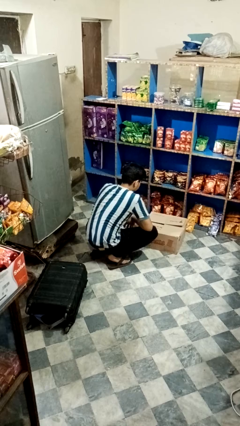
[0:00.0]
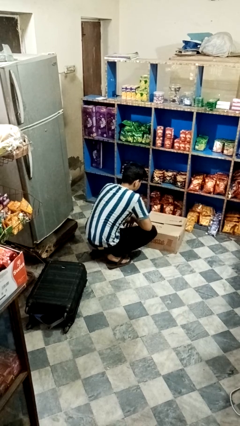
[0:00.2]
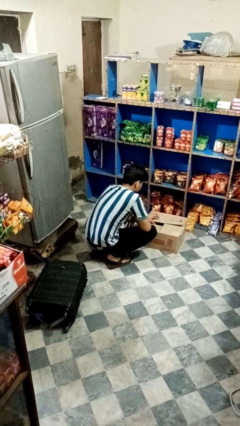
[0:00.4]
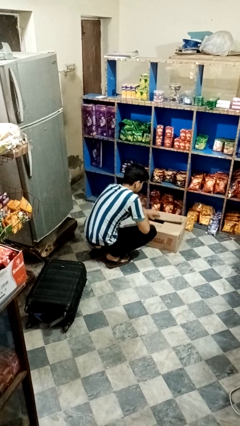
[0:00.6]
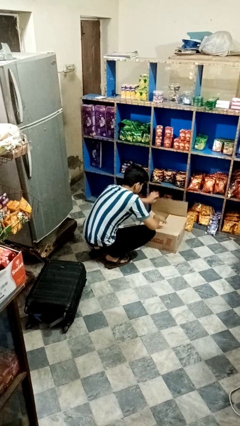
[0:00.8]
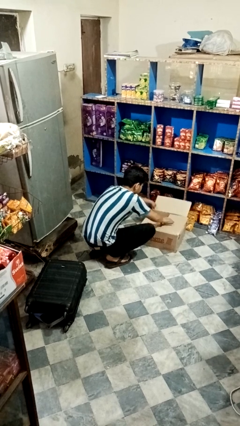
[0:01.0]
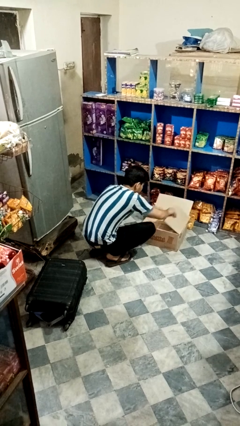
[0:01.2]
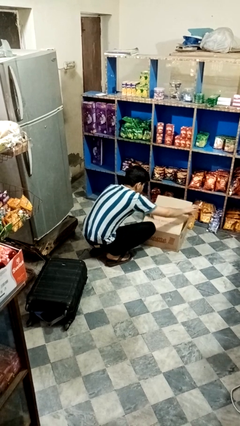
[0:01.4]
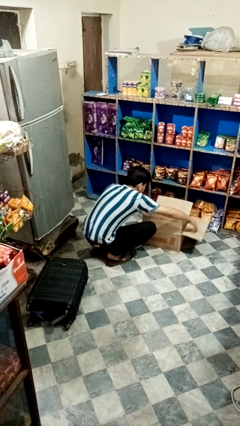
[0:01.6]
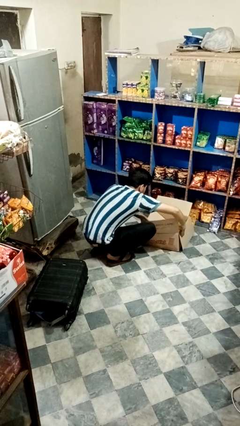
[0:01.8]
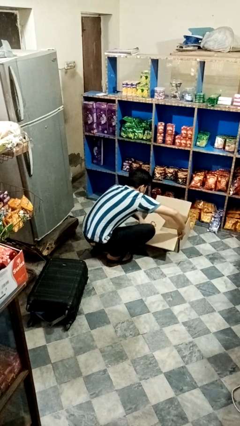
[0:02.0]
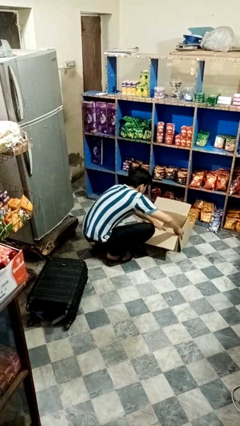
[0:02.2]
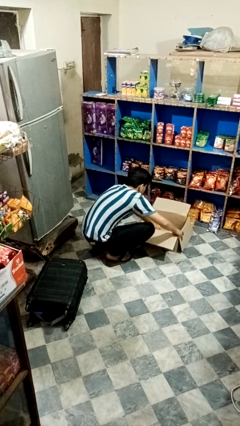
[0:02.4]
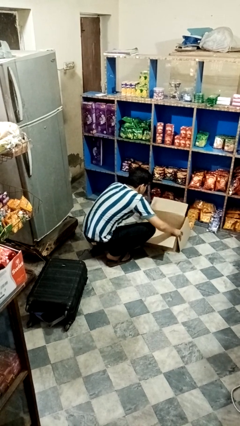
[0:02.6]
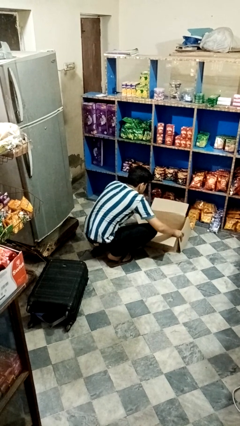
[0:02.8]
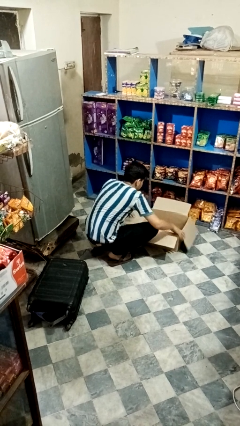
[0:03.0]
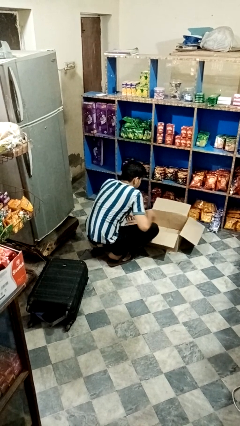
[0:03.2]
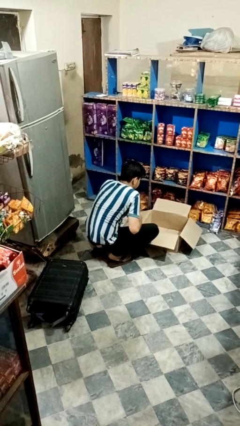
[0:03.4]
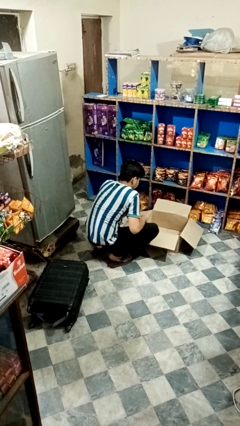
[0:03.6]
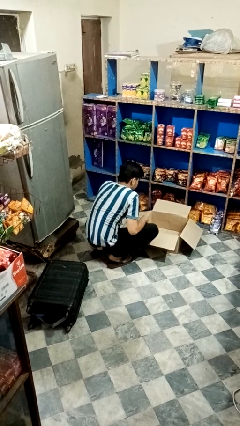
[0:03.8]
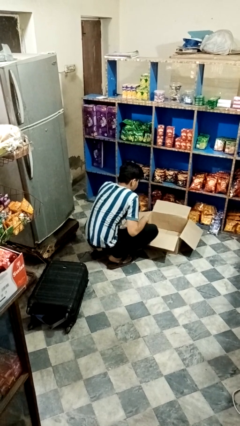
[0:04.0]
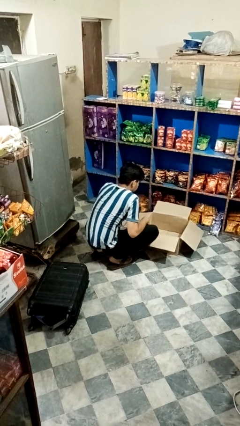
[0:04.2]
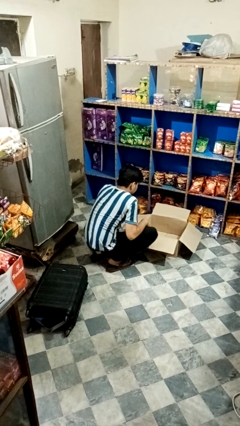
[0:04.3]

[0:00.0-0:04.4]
person opens box

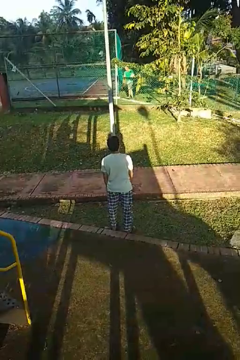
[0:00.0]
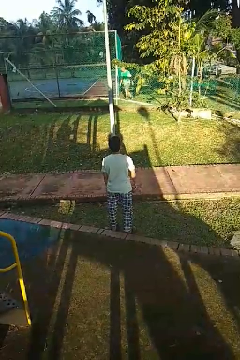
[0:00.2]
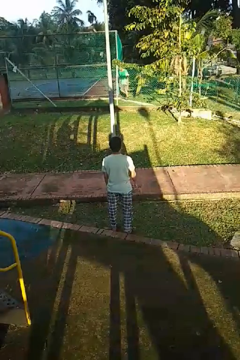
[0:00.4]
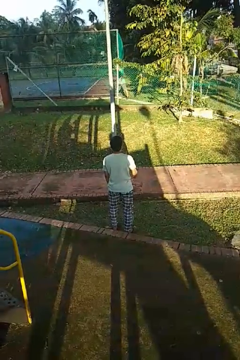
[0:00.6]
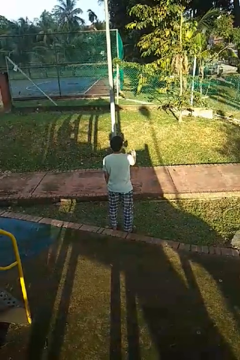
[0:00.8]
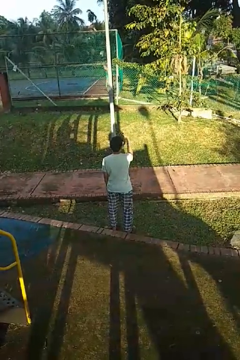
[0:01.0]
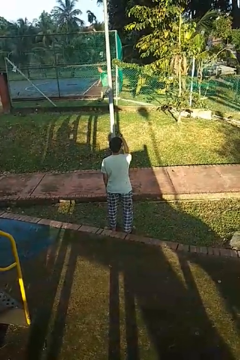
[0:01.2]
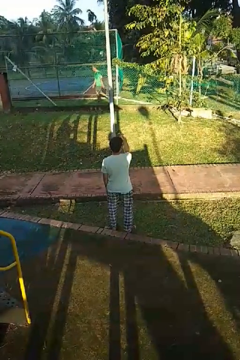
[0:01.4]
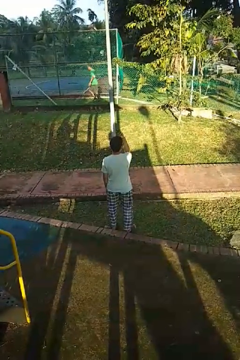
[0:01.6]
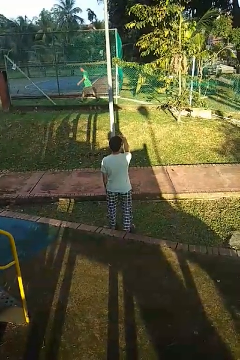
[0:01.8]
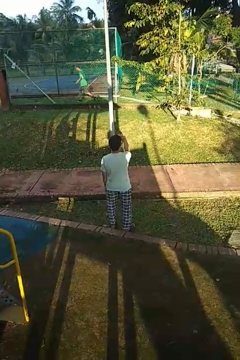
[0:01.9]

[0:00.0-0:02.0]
person gestures watch closely

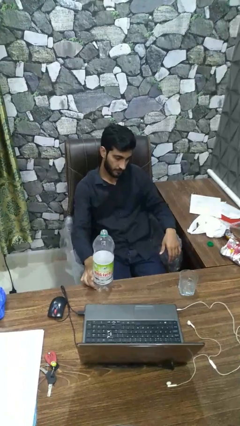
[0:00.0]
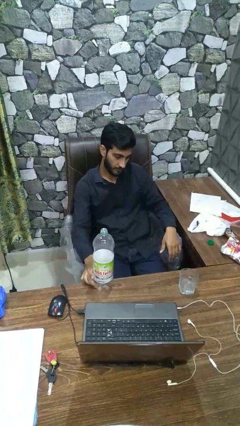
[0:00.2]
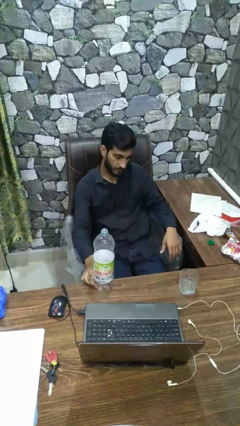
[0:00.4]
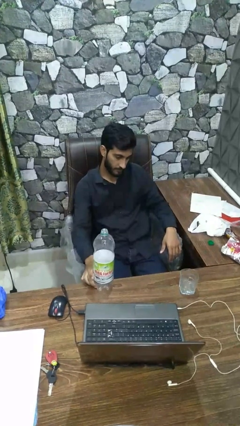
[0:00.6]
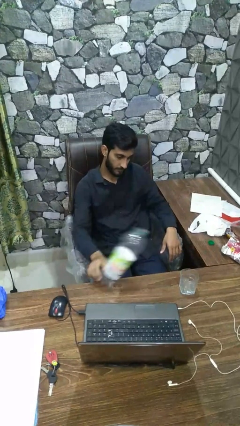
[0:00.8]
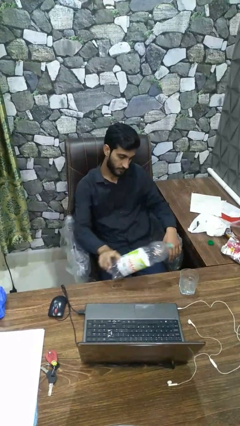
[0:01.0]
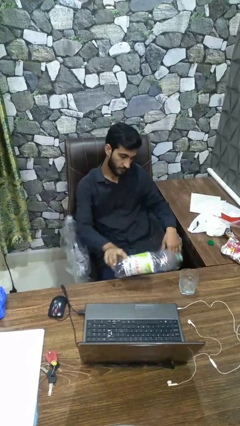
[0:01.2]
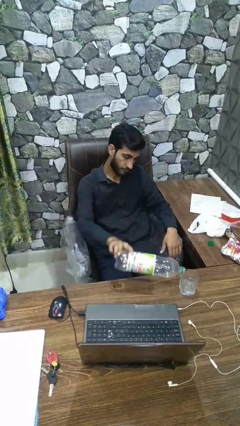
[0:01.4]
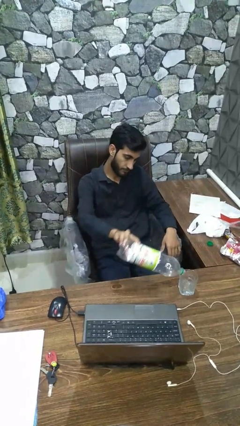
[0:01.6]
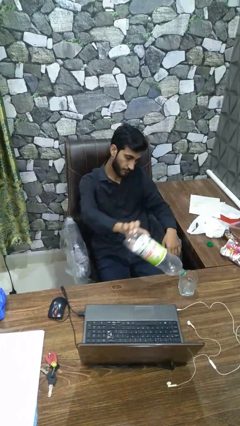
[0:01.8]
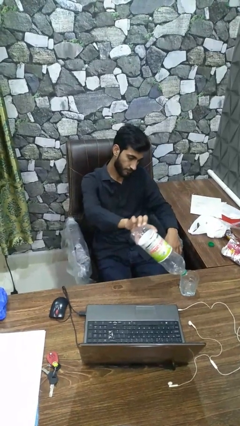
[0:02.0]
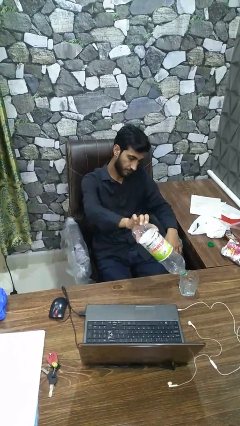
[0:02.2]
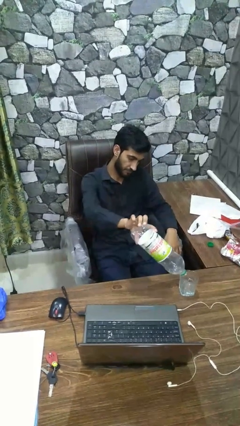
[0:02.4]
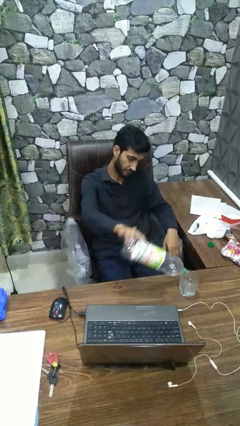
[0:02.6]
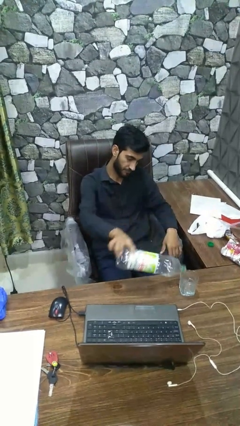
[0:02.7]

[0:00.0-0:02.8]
person pours liquid into cup

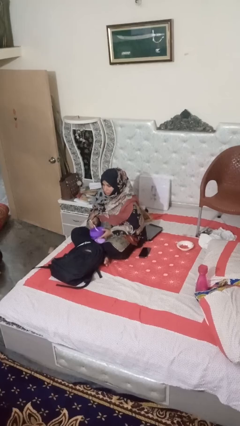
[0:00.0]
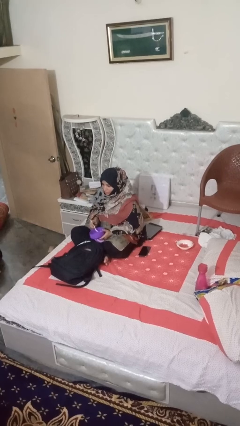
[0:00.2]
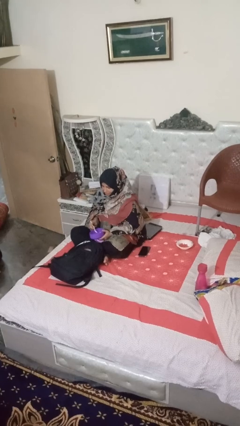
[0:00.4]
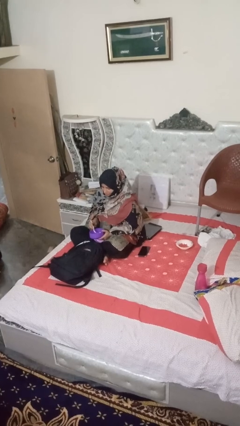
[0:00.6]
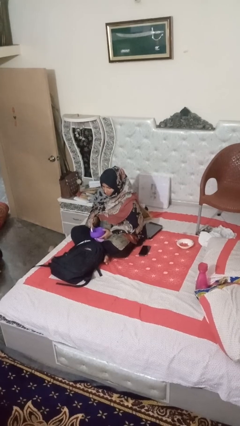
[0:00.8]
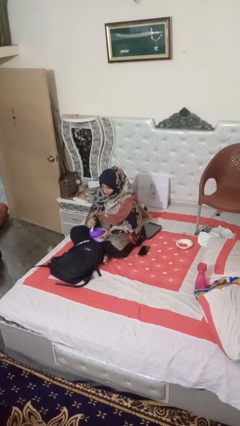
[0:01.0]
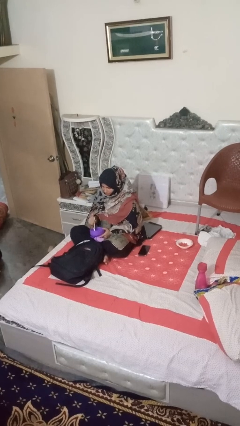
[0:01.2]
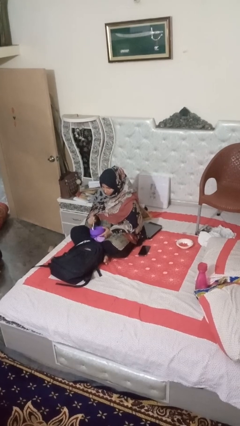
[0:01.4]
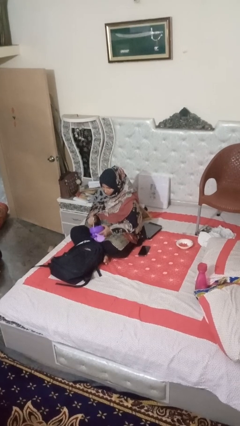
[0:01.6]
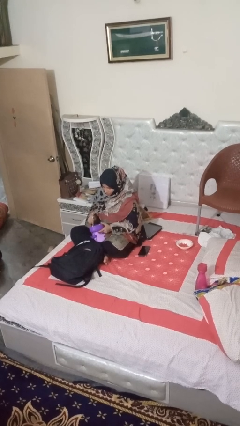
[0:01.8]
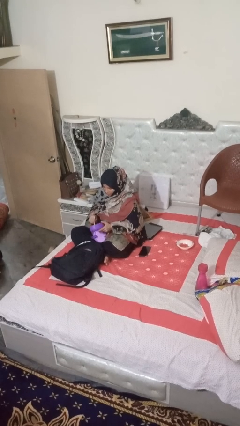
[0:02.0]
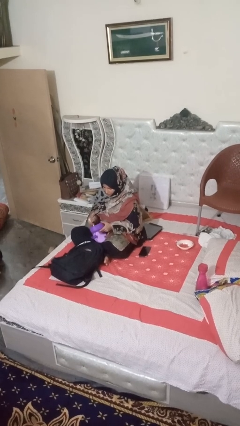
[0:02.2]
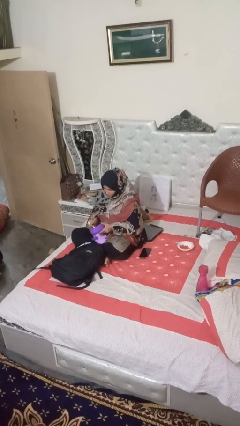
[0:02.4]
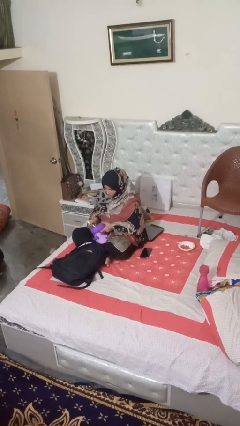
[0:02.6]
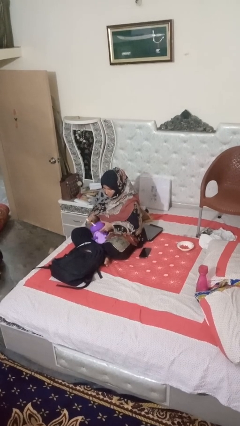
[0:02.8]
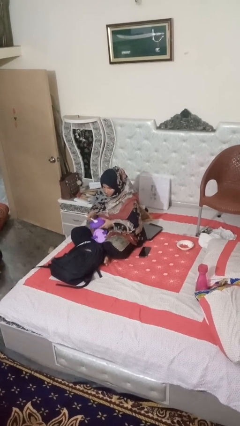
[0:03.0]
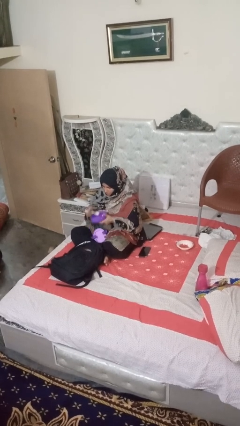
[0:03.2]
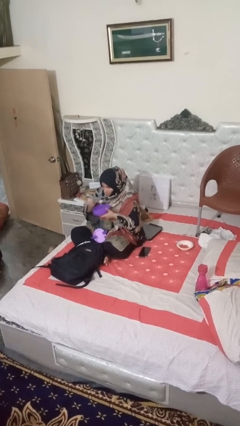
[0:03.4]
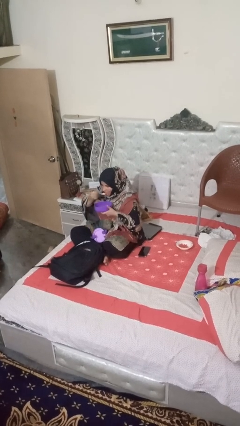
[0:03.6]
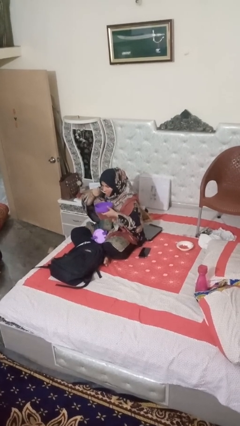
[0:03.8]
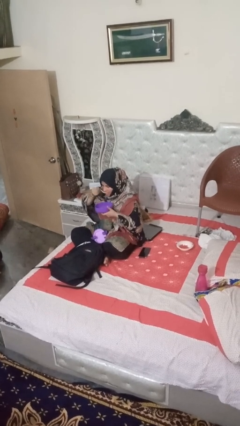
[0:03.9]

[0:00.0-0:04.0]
person eats snack from bag

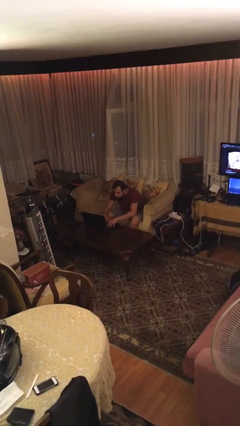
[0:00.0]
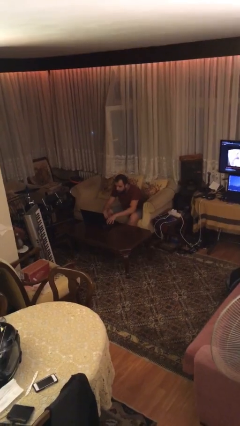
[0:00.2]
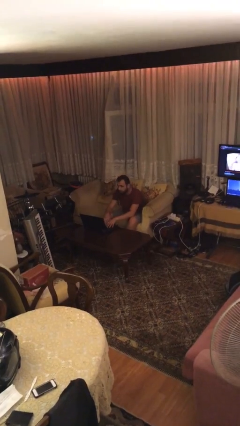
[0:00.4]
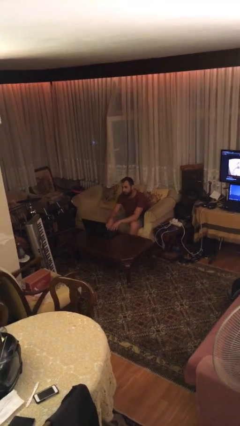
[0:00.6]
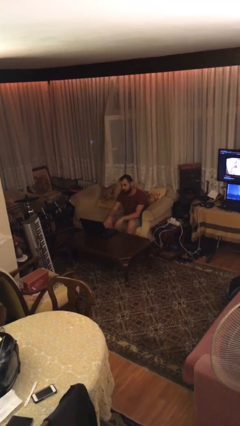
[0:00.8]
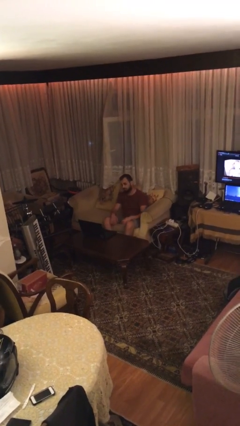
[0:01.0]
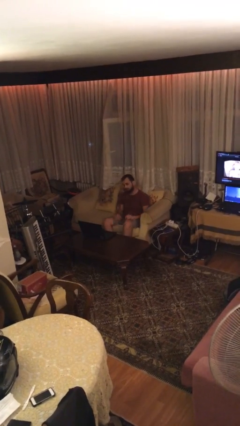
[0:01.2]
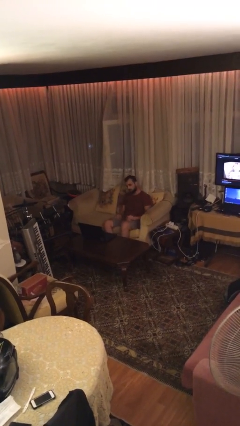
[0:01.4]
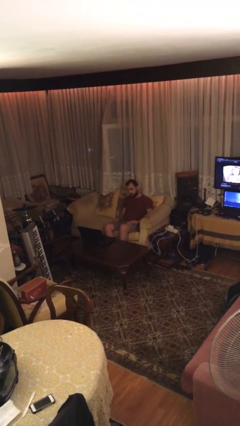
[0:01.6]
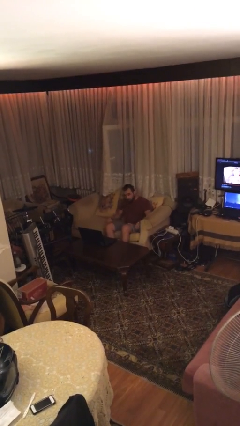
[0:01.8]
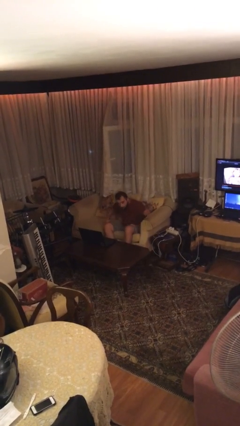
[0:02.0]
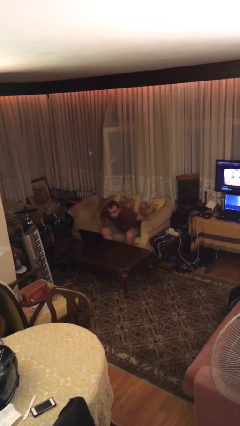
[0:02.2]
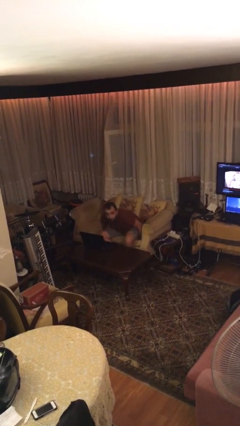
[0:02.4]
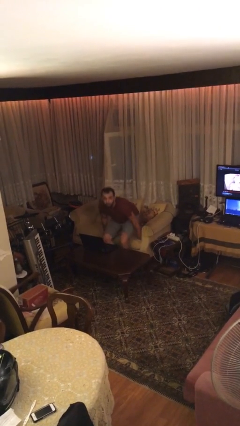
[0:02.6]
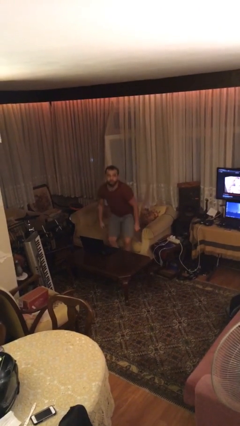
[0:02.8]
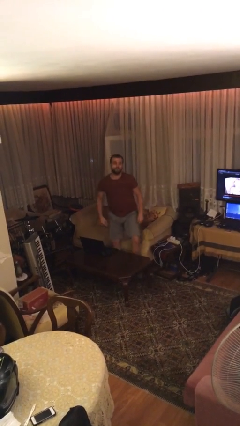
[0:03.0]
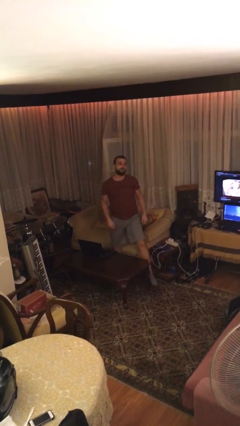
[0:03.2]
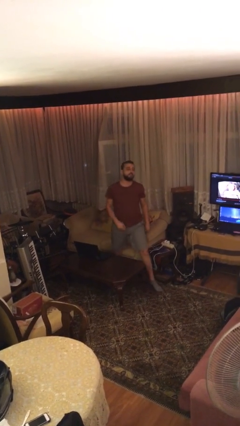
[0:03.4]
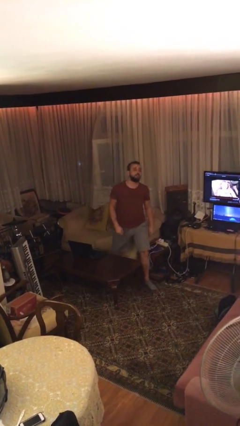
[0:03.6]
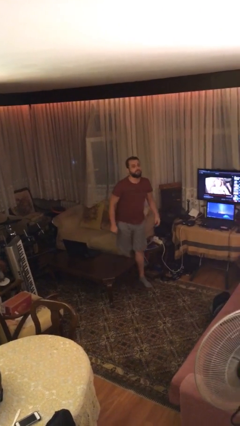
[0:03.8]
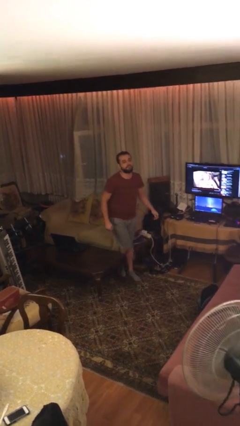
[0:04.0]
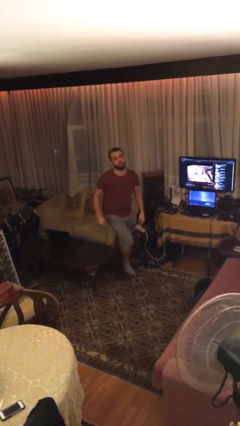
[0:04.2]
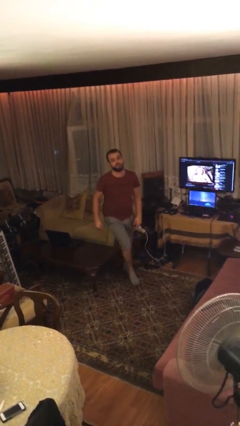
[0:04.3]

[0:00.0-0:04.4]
person stands up

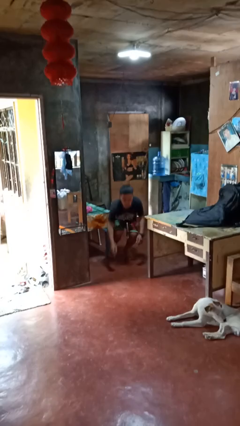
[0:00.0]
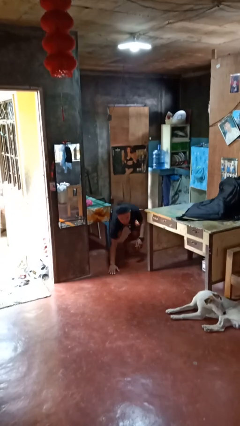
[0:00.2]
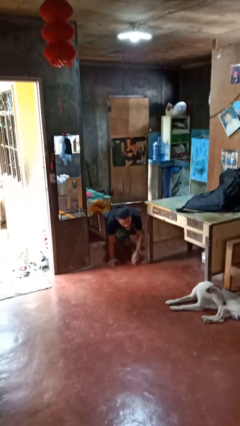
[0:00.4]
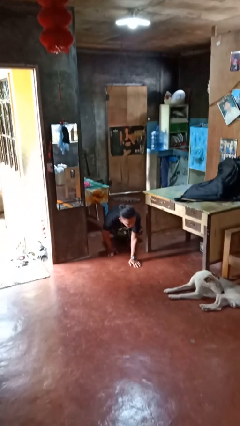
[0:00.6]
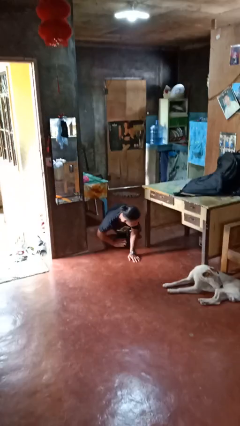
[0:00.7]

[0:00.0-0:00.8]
person trips on object on floor
